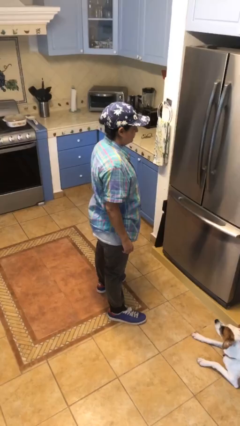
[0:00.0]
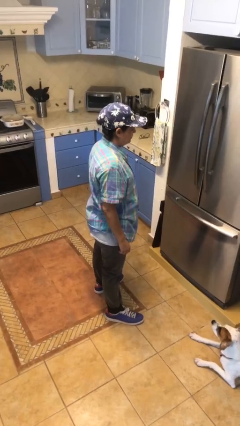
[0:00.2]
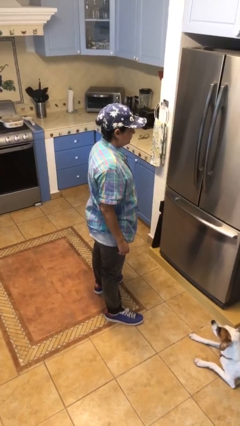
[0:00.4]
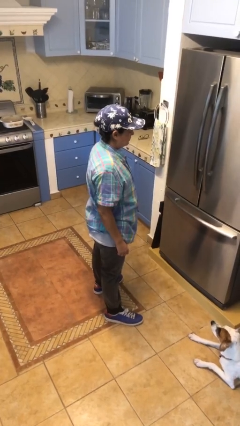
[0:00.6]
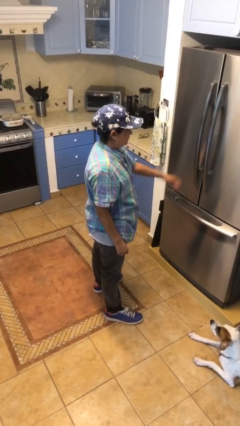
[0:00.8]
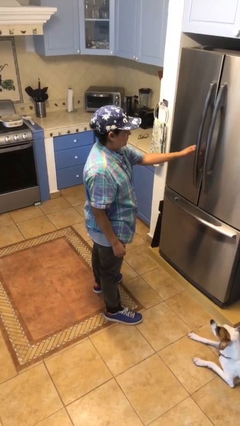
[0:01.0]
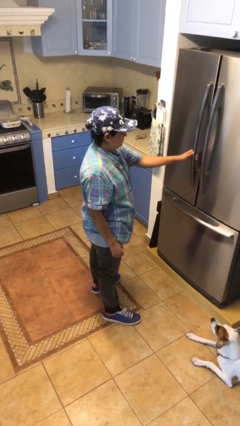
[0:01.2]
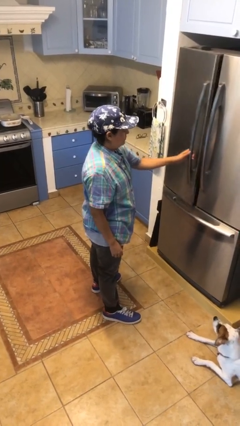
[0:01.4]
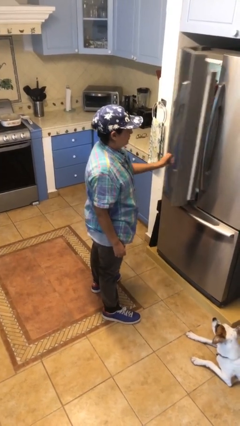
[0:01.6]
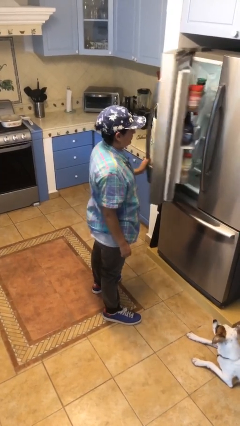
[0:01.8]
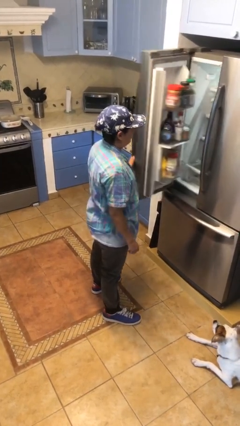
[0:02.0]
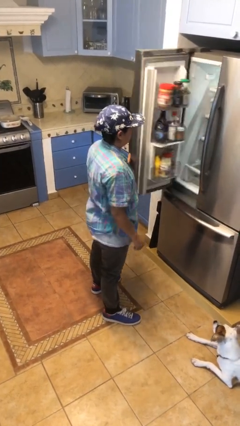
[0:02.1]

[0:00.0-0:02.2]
person opens refrigerator

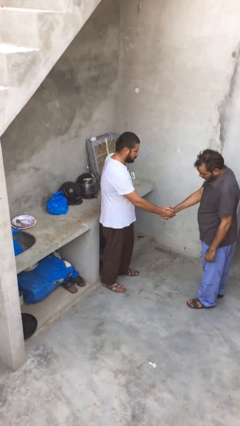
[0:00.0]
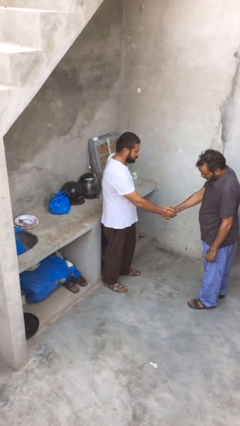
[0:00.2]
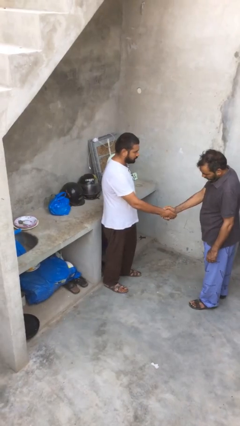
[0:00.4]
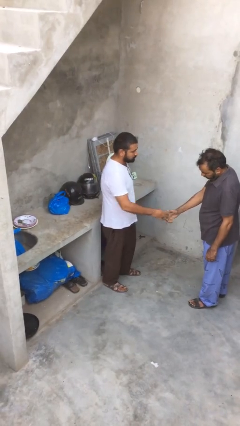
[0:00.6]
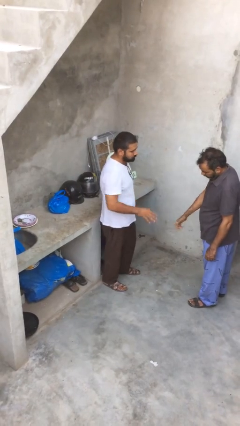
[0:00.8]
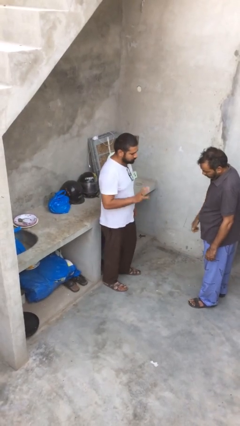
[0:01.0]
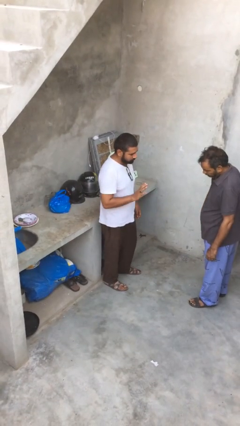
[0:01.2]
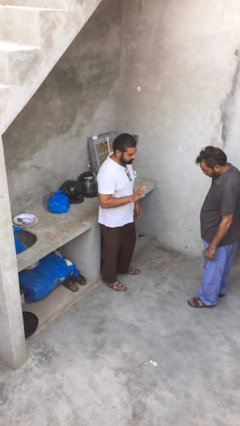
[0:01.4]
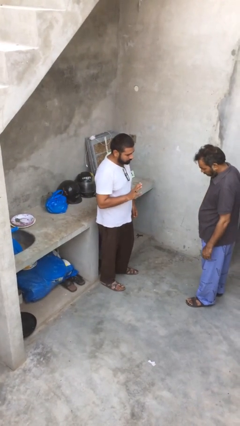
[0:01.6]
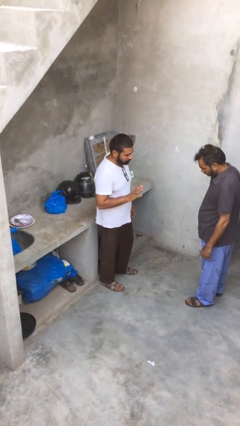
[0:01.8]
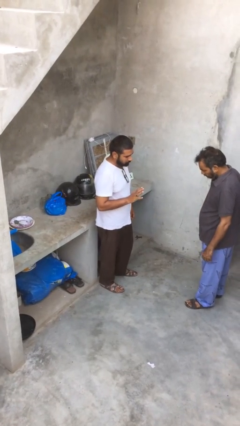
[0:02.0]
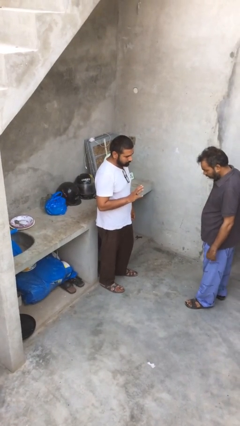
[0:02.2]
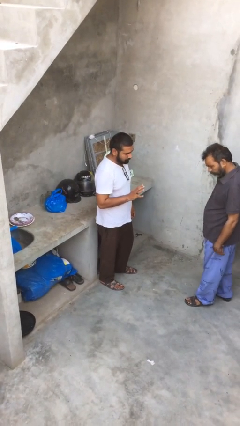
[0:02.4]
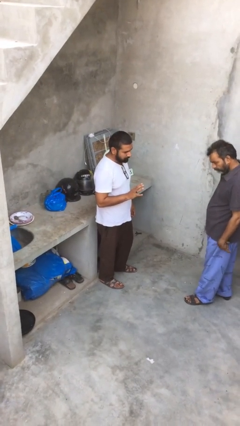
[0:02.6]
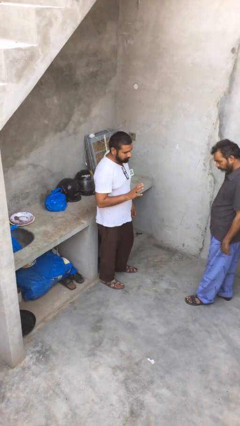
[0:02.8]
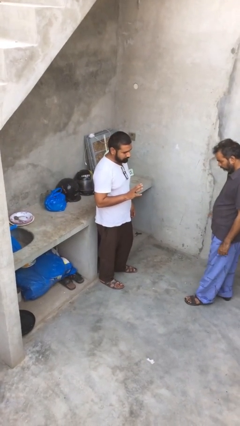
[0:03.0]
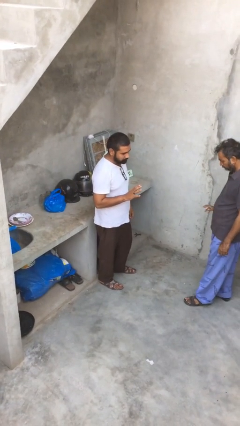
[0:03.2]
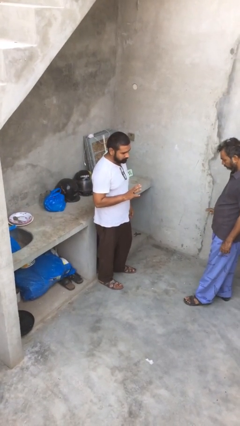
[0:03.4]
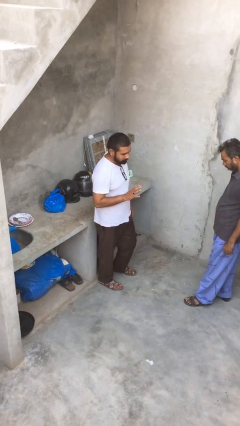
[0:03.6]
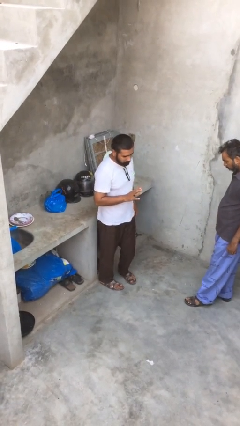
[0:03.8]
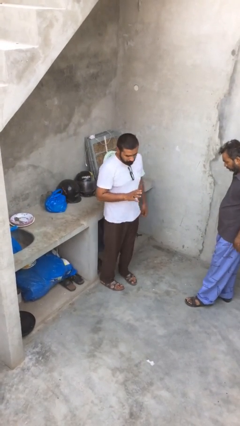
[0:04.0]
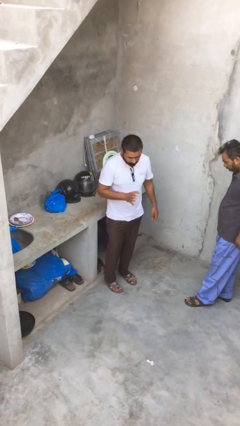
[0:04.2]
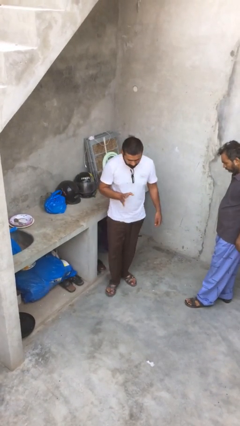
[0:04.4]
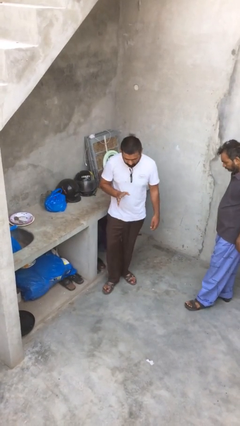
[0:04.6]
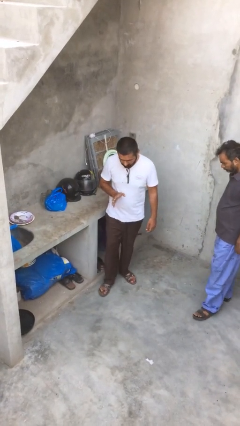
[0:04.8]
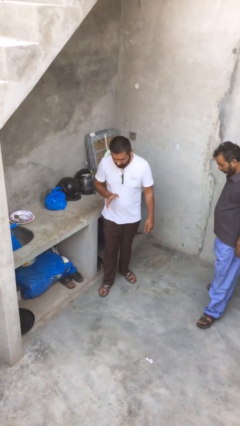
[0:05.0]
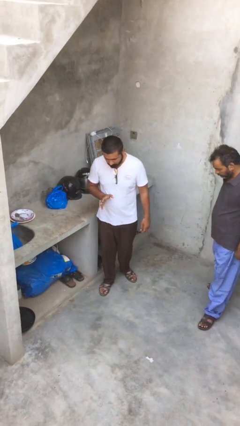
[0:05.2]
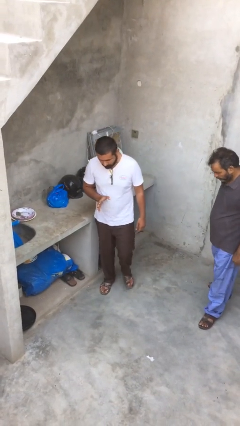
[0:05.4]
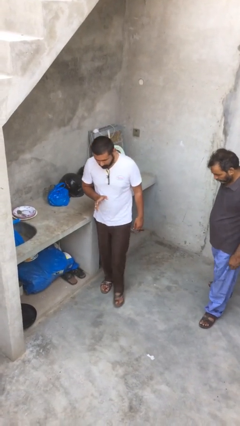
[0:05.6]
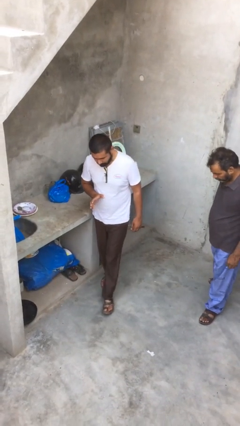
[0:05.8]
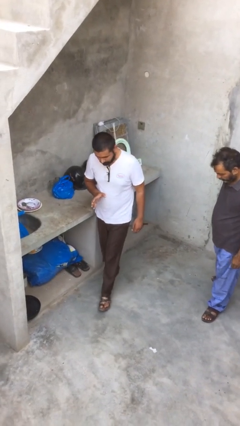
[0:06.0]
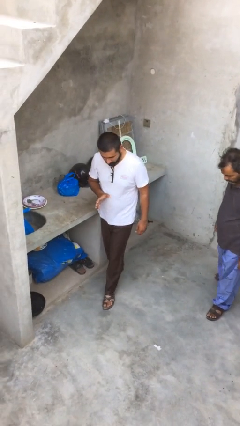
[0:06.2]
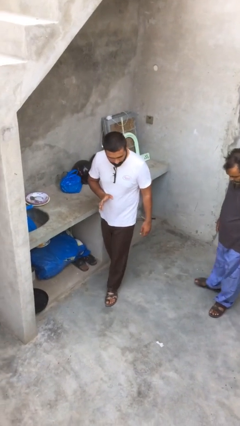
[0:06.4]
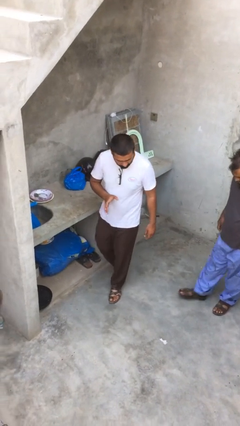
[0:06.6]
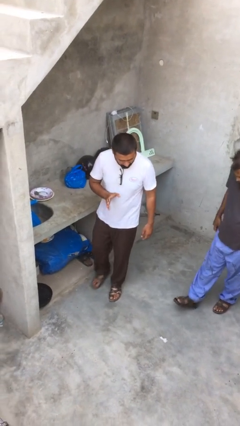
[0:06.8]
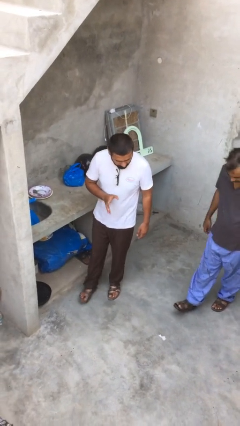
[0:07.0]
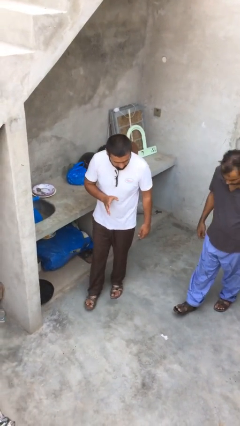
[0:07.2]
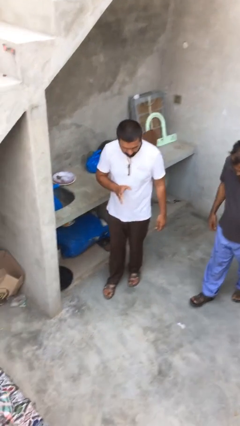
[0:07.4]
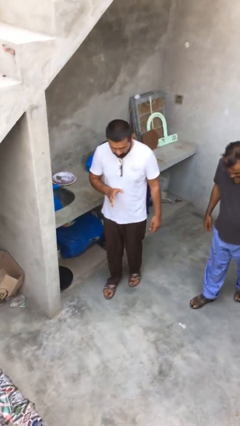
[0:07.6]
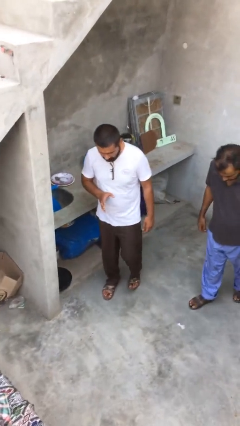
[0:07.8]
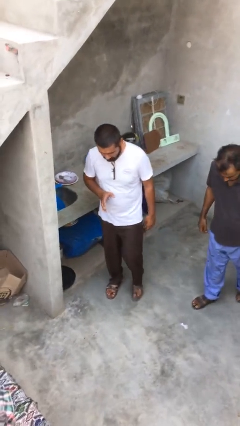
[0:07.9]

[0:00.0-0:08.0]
person talks to person

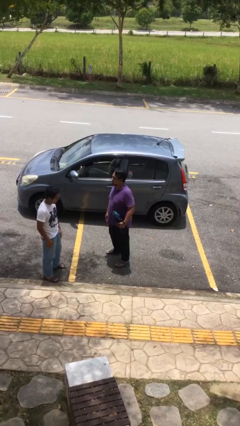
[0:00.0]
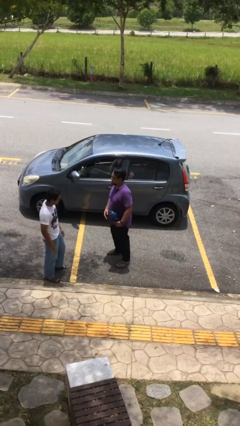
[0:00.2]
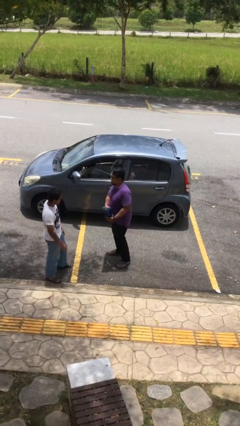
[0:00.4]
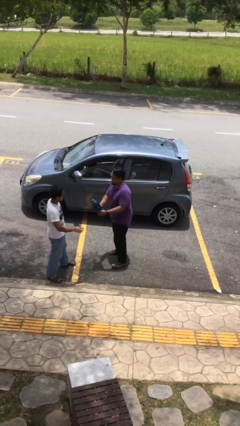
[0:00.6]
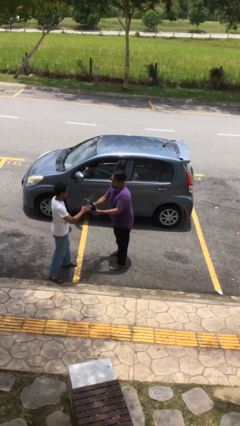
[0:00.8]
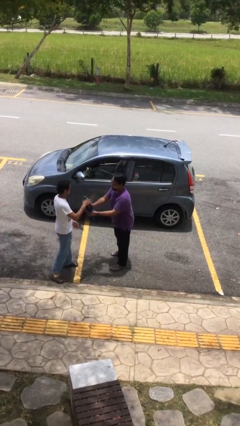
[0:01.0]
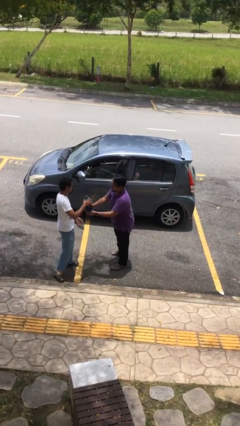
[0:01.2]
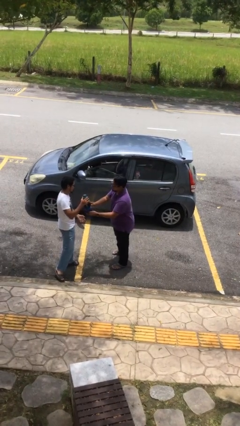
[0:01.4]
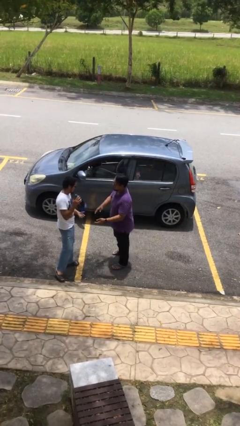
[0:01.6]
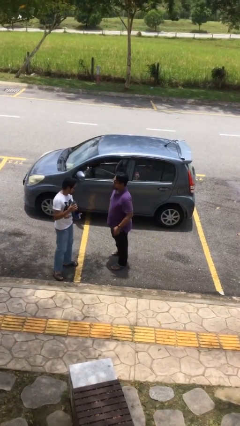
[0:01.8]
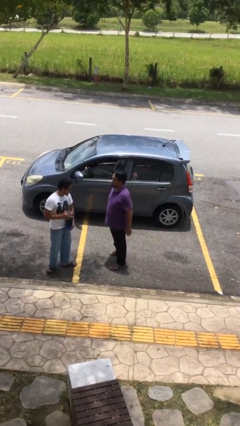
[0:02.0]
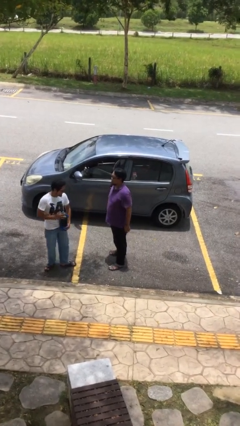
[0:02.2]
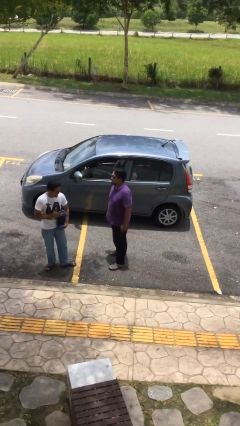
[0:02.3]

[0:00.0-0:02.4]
person transfers object to person

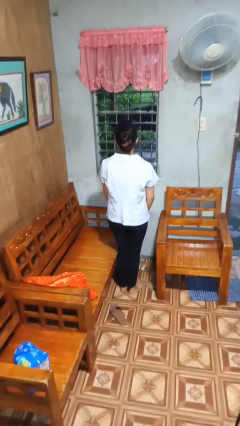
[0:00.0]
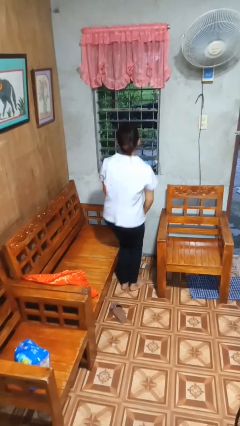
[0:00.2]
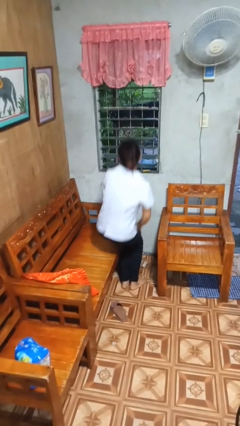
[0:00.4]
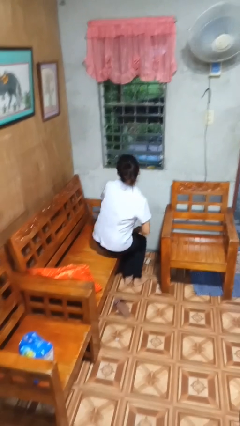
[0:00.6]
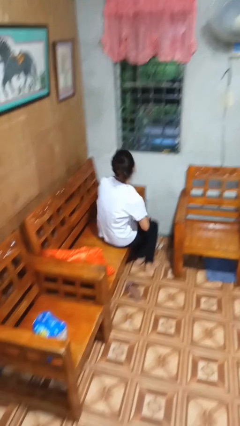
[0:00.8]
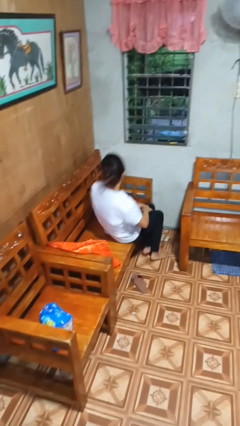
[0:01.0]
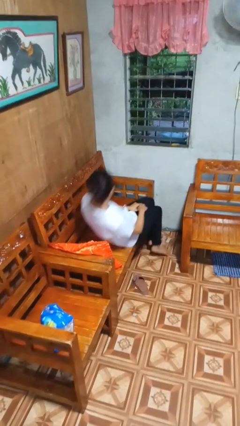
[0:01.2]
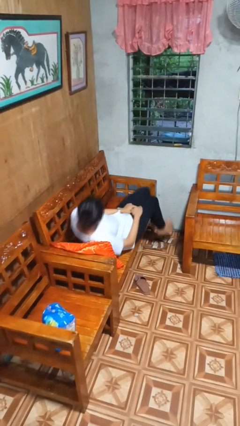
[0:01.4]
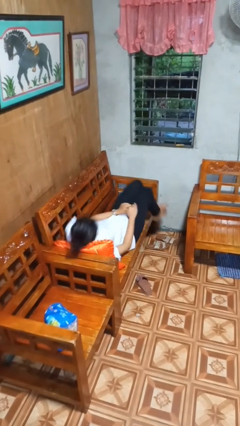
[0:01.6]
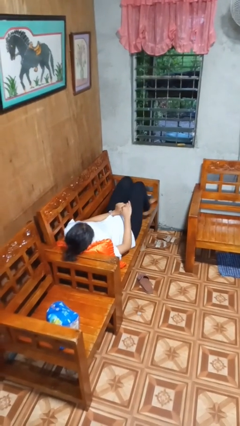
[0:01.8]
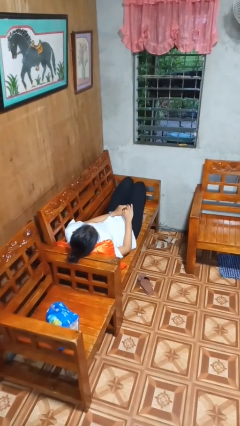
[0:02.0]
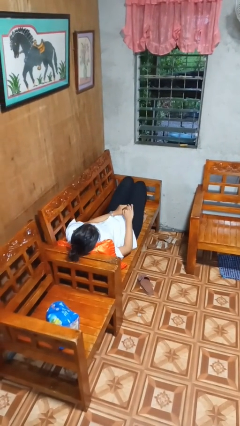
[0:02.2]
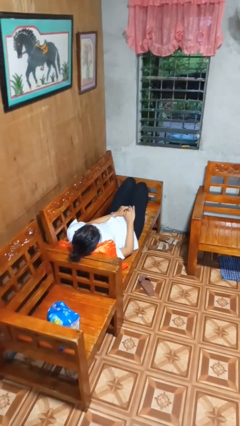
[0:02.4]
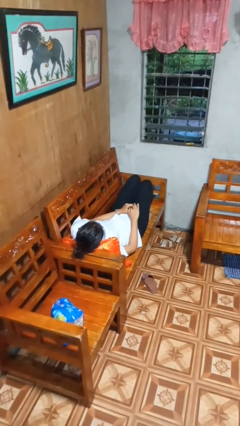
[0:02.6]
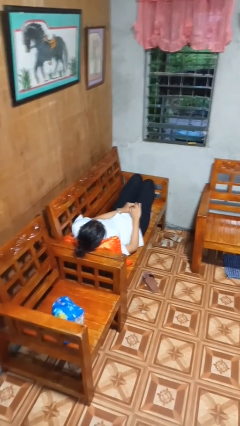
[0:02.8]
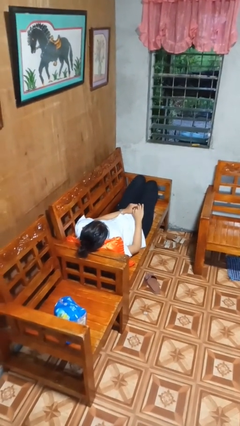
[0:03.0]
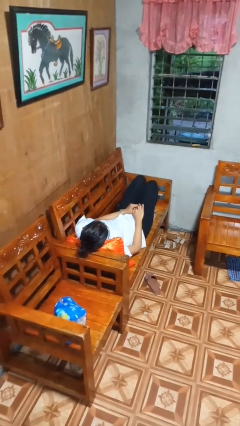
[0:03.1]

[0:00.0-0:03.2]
person lies down on couch

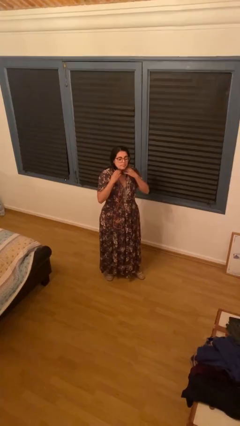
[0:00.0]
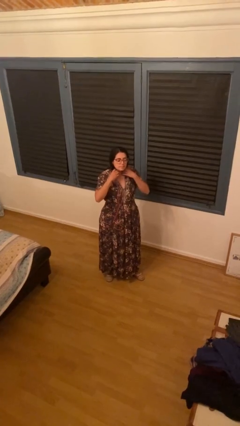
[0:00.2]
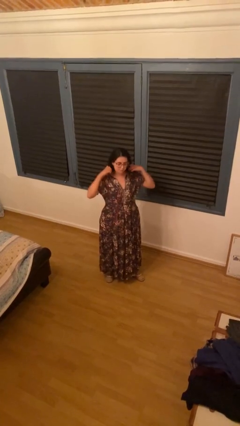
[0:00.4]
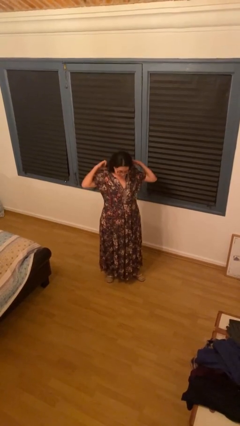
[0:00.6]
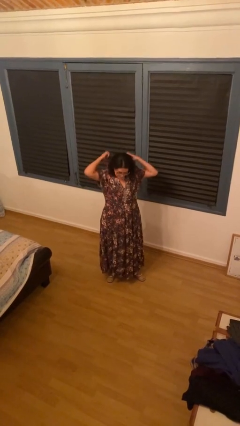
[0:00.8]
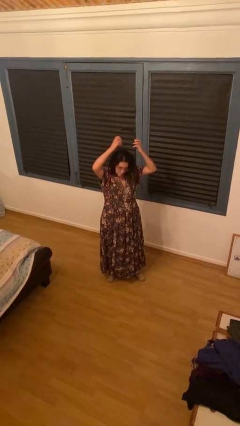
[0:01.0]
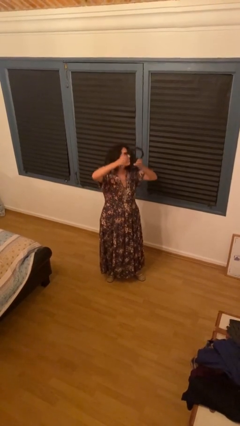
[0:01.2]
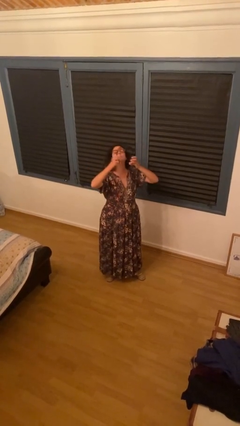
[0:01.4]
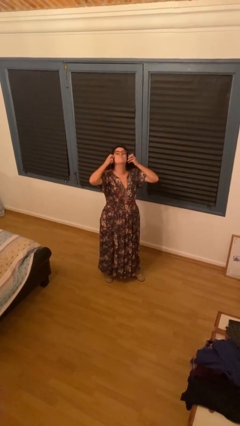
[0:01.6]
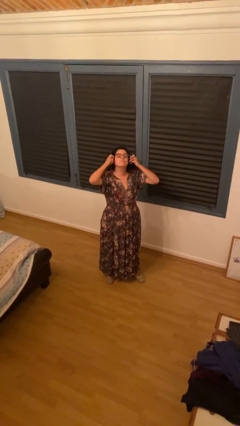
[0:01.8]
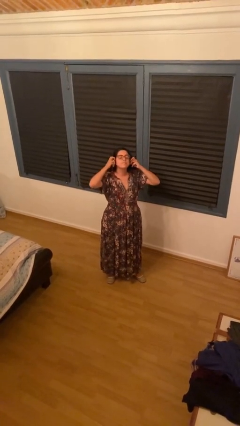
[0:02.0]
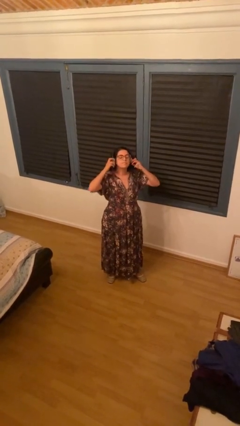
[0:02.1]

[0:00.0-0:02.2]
person puts on headphones
